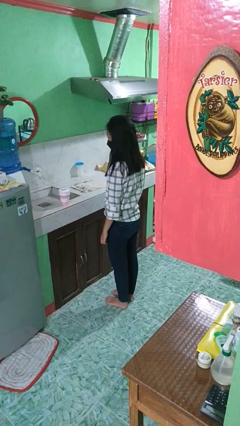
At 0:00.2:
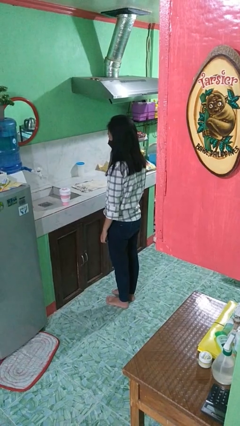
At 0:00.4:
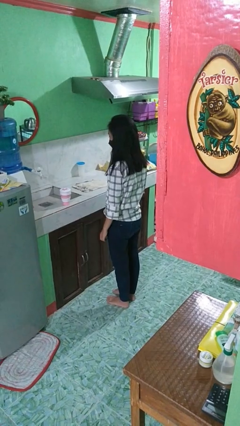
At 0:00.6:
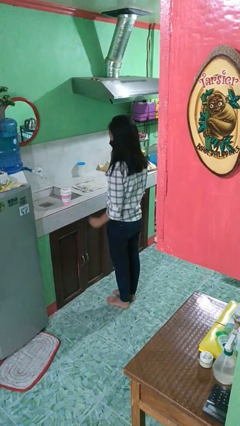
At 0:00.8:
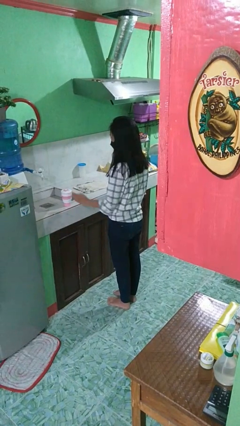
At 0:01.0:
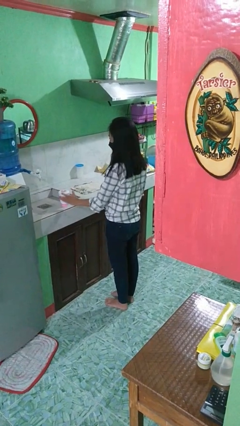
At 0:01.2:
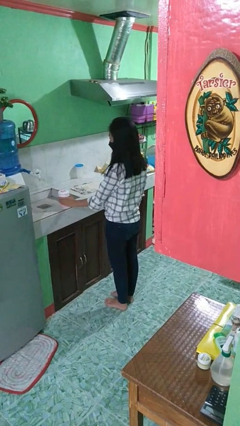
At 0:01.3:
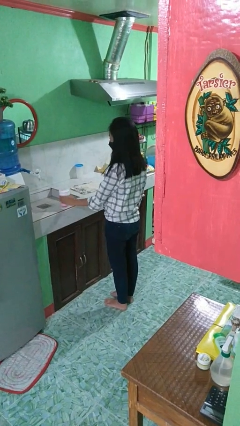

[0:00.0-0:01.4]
person picks up object from countertop

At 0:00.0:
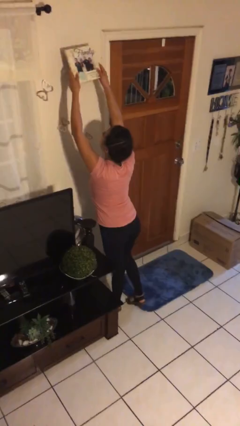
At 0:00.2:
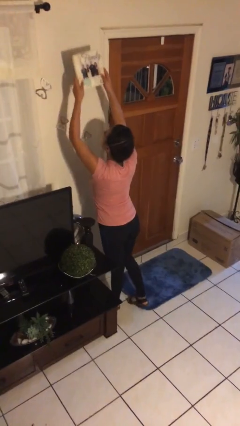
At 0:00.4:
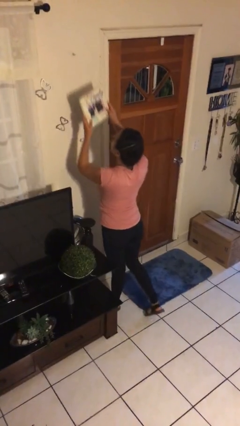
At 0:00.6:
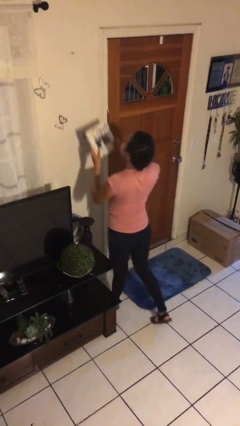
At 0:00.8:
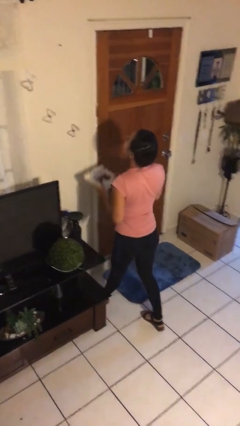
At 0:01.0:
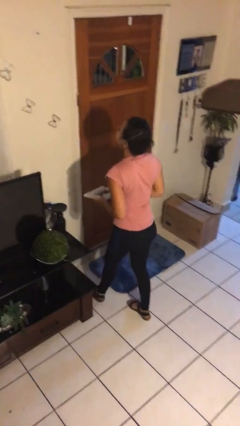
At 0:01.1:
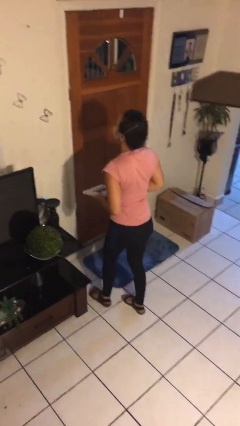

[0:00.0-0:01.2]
person takes down picture frame

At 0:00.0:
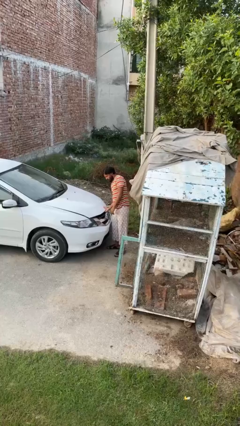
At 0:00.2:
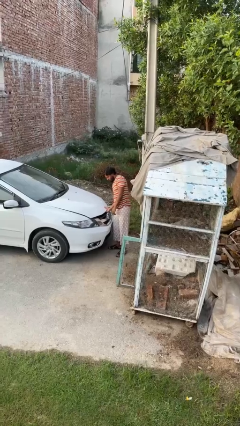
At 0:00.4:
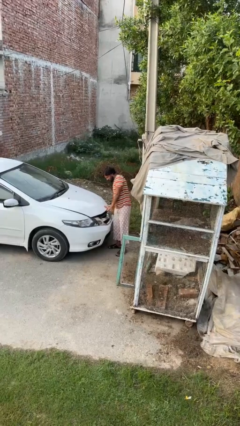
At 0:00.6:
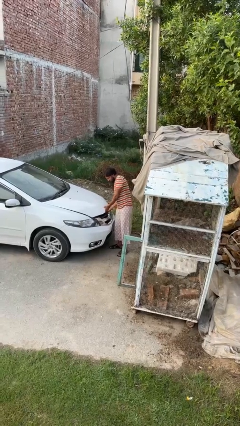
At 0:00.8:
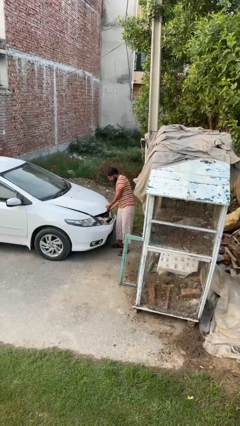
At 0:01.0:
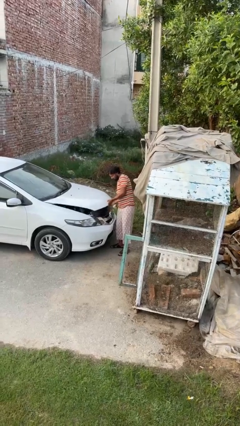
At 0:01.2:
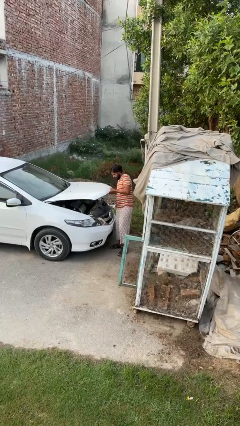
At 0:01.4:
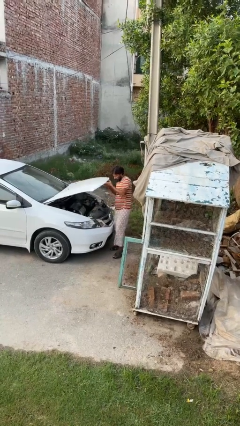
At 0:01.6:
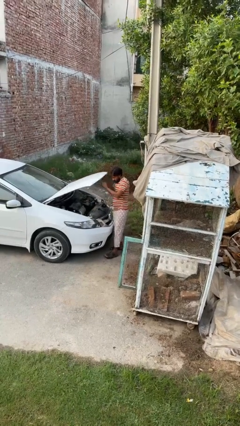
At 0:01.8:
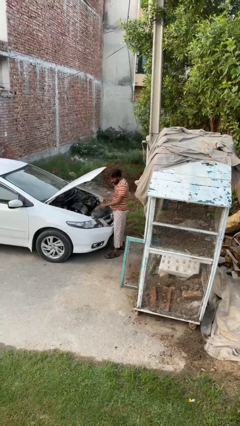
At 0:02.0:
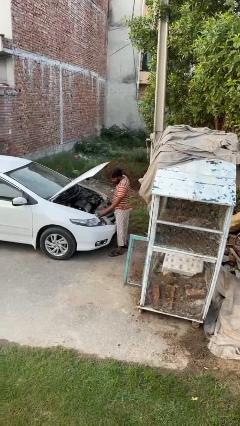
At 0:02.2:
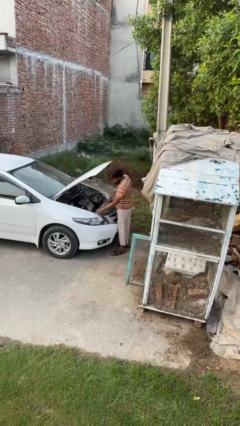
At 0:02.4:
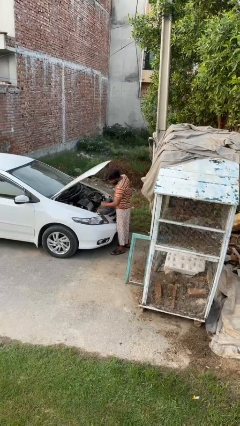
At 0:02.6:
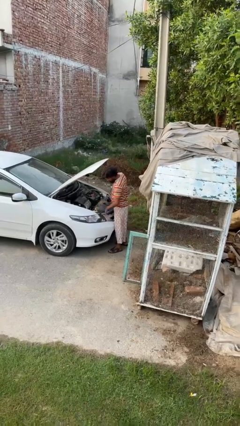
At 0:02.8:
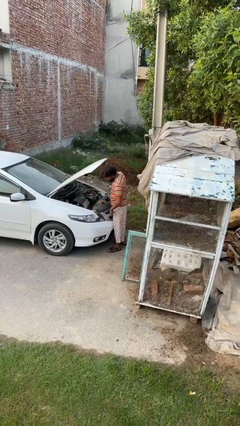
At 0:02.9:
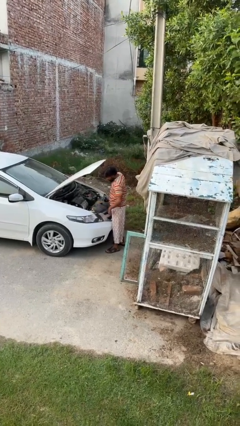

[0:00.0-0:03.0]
person opens car hood

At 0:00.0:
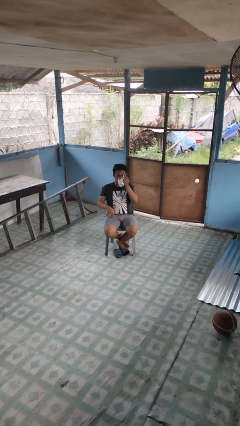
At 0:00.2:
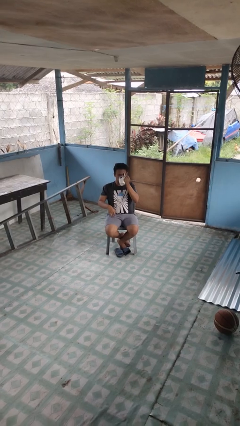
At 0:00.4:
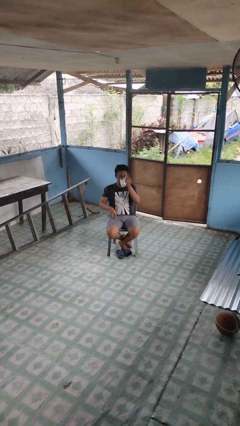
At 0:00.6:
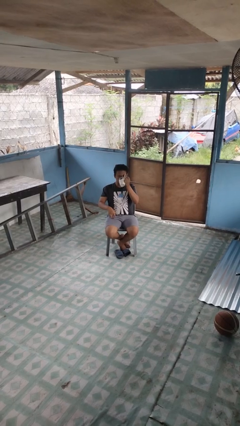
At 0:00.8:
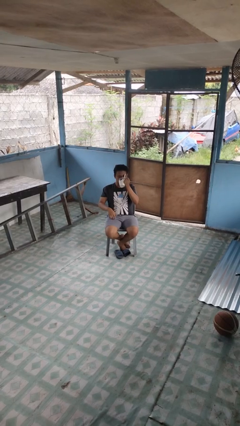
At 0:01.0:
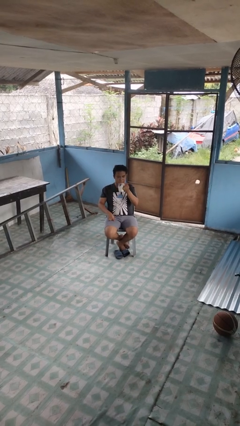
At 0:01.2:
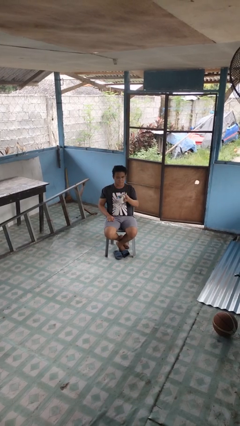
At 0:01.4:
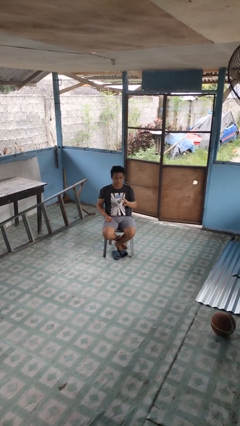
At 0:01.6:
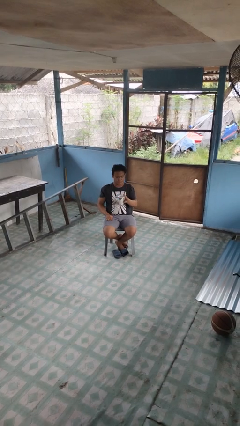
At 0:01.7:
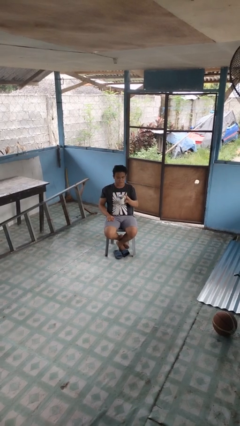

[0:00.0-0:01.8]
person drinks from mug

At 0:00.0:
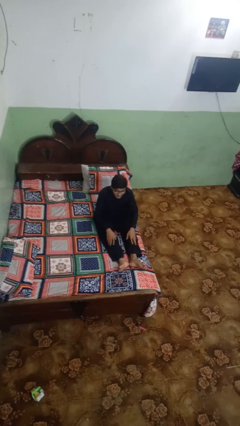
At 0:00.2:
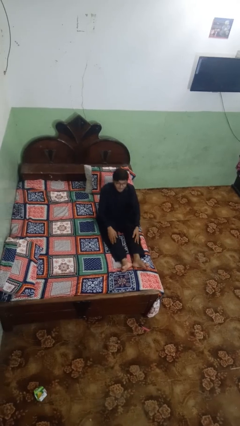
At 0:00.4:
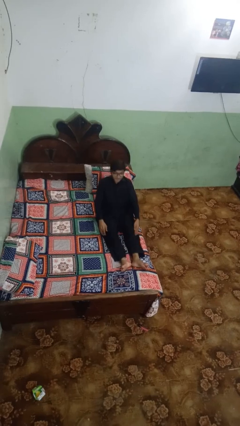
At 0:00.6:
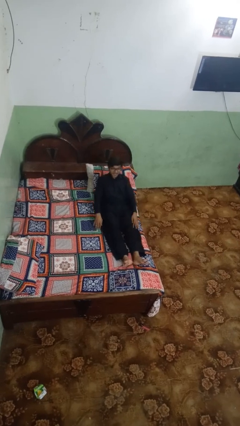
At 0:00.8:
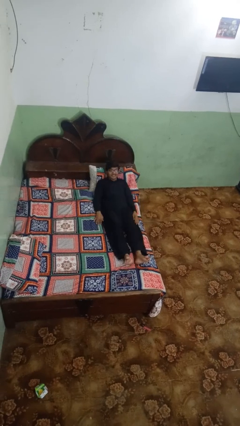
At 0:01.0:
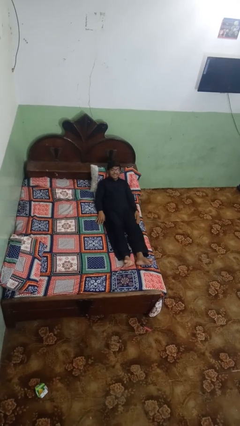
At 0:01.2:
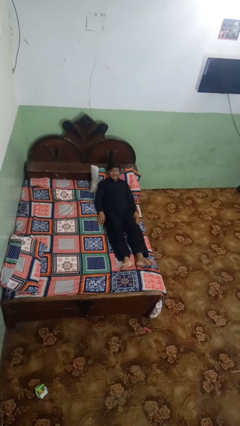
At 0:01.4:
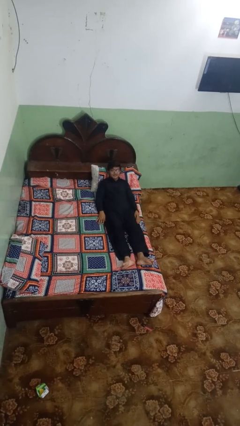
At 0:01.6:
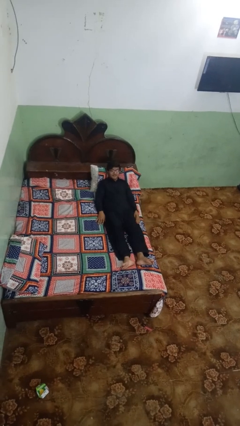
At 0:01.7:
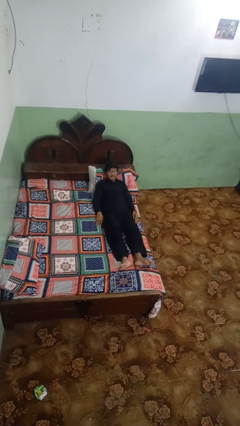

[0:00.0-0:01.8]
person lies down on bed

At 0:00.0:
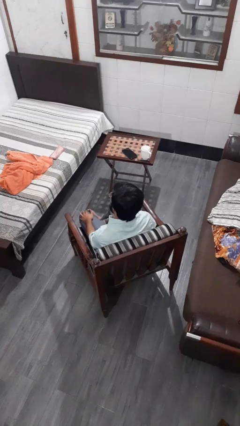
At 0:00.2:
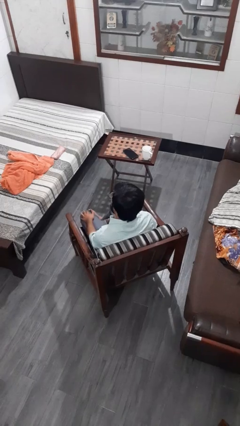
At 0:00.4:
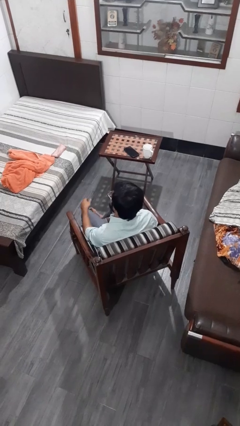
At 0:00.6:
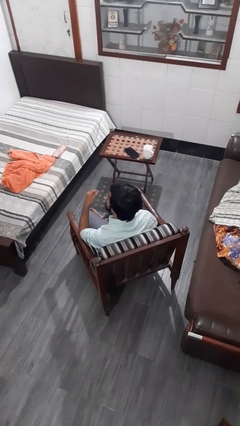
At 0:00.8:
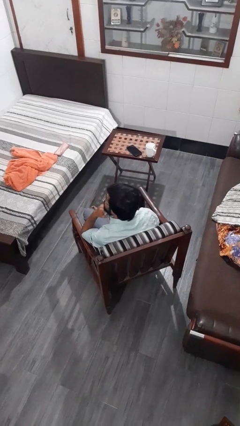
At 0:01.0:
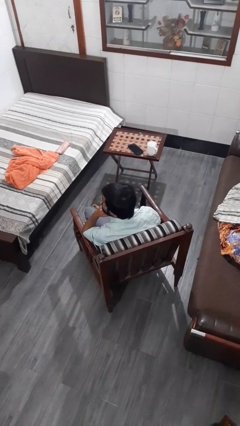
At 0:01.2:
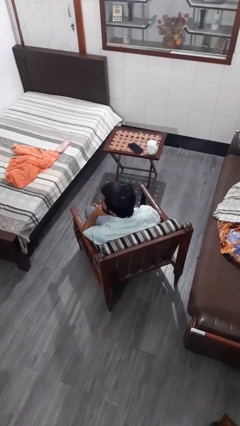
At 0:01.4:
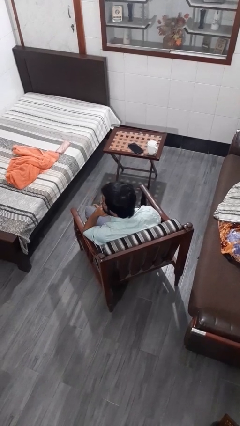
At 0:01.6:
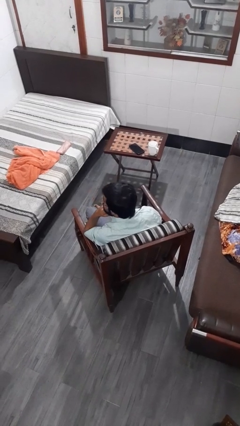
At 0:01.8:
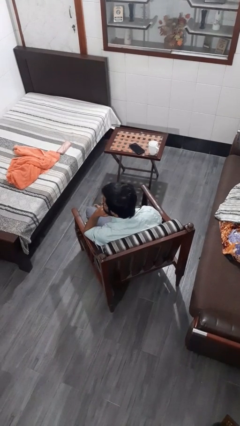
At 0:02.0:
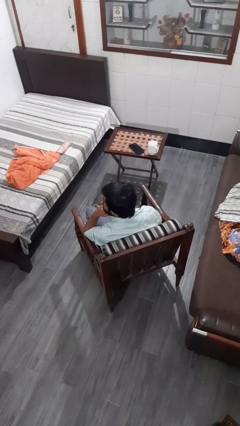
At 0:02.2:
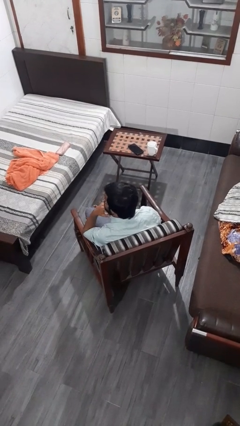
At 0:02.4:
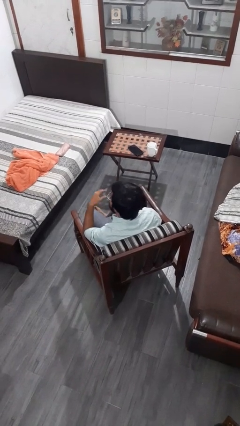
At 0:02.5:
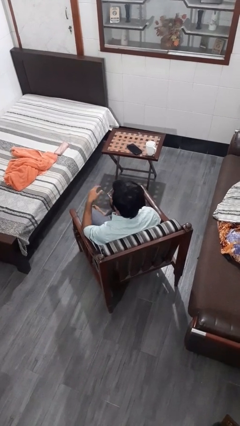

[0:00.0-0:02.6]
person strokes chin

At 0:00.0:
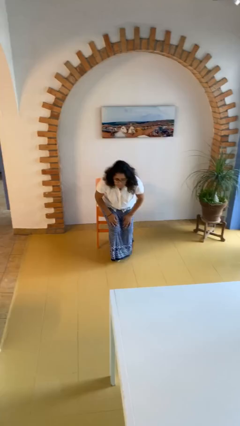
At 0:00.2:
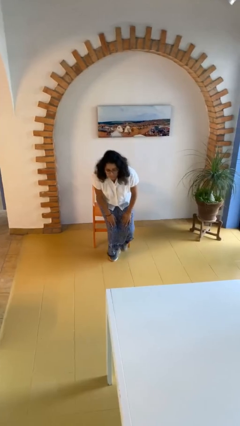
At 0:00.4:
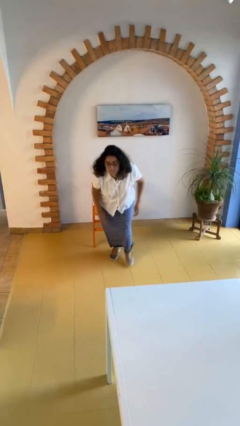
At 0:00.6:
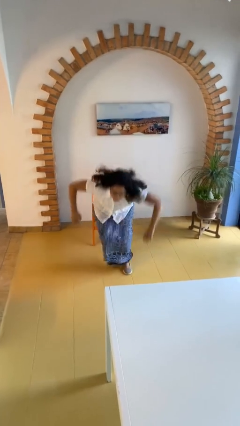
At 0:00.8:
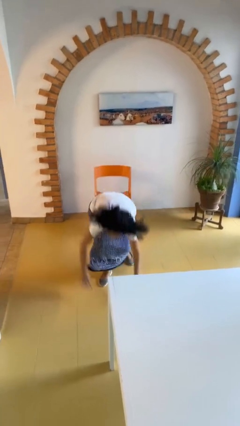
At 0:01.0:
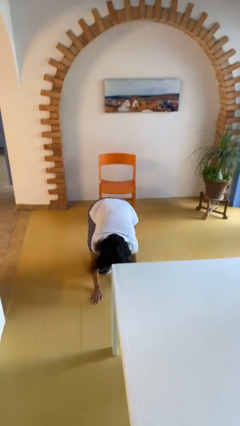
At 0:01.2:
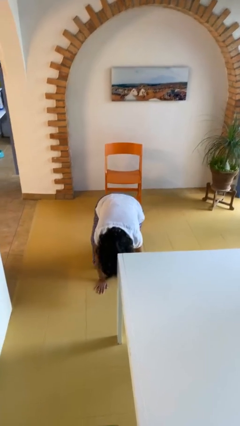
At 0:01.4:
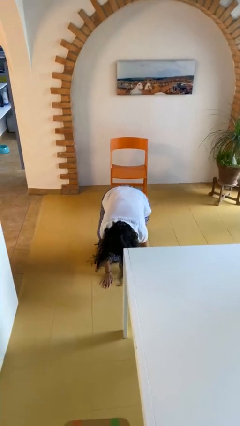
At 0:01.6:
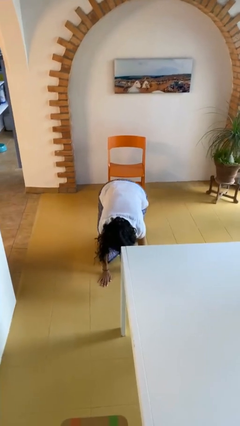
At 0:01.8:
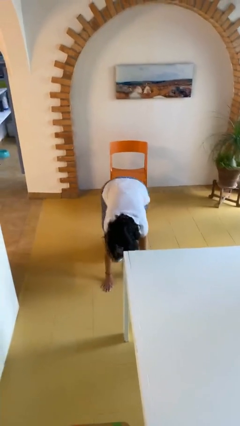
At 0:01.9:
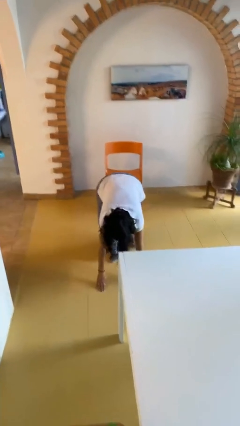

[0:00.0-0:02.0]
person falls from chair

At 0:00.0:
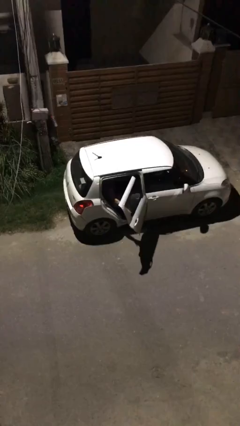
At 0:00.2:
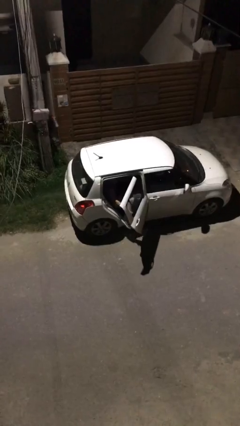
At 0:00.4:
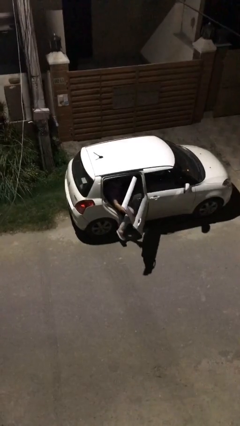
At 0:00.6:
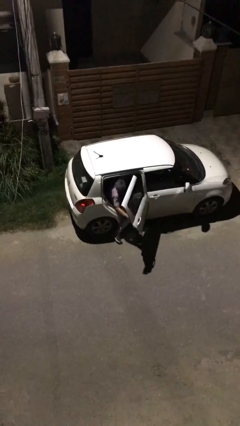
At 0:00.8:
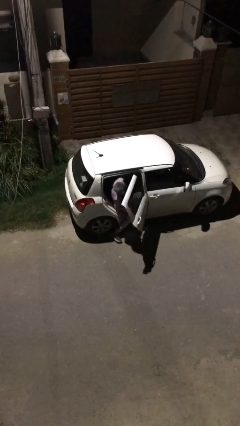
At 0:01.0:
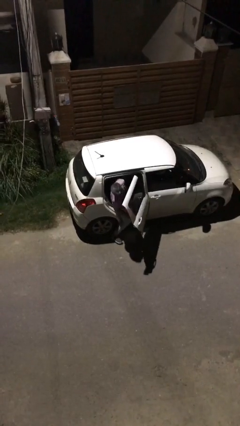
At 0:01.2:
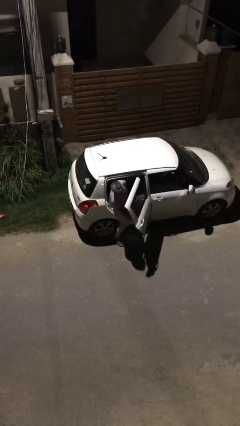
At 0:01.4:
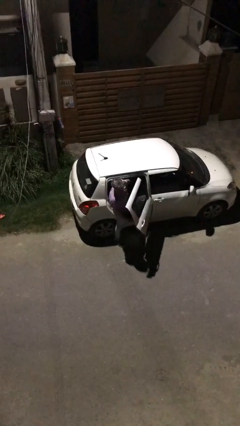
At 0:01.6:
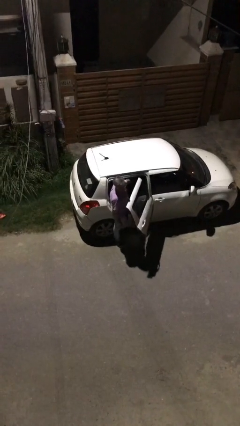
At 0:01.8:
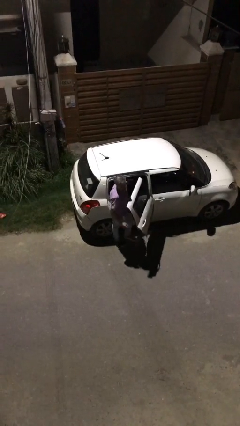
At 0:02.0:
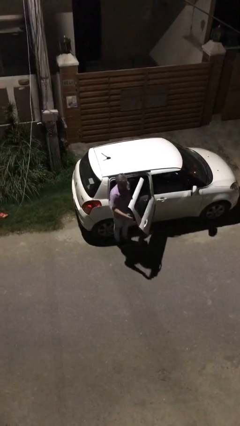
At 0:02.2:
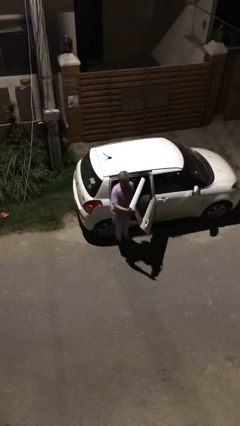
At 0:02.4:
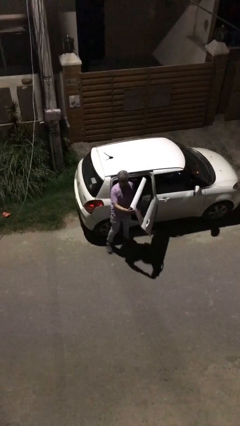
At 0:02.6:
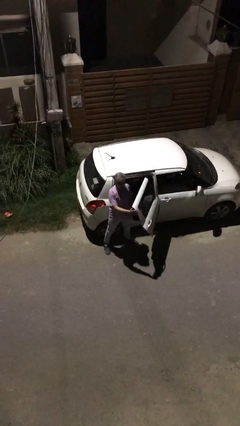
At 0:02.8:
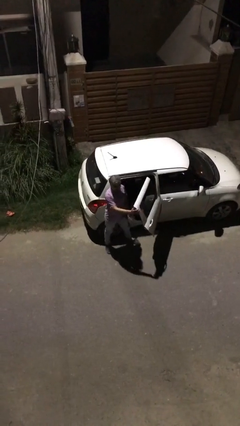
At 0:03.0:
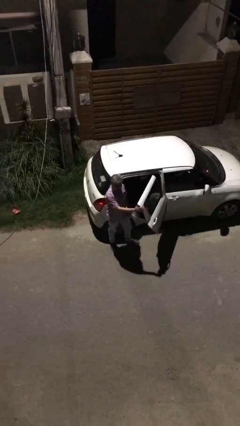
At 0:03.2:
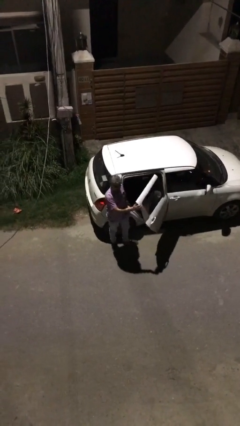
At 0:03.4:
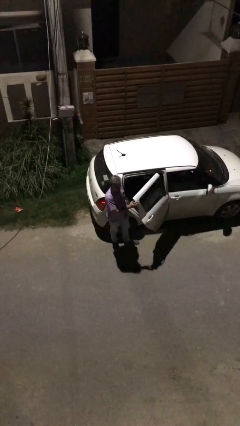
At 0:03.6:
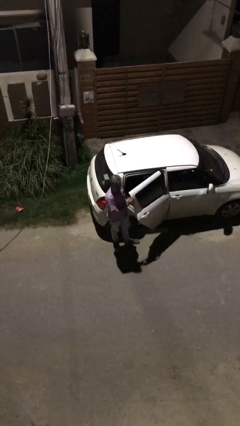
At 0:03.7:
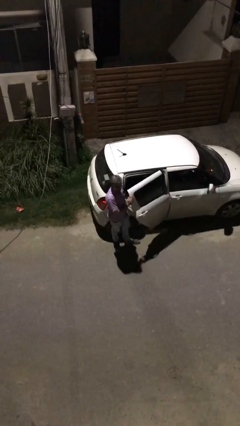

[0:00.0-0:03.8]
person exits car
